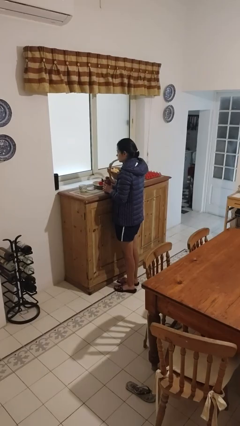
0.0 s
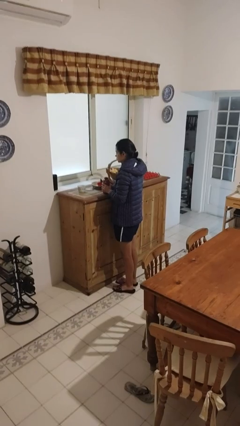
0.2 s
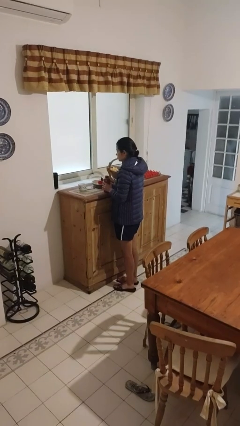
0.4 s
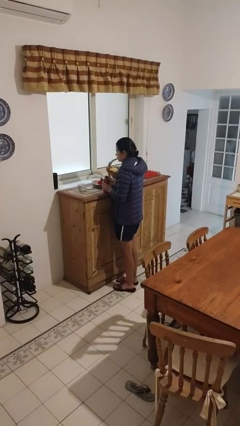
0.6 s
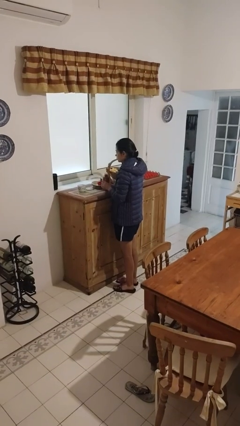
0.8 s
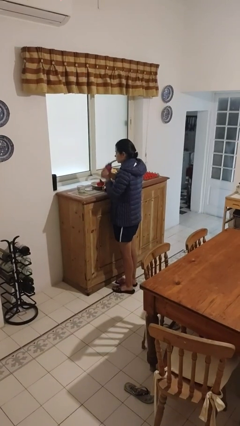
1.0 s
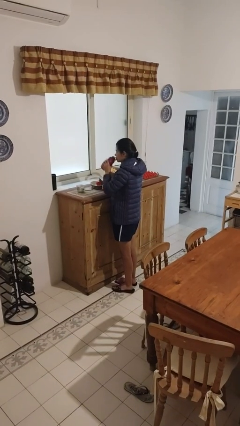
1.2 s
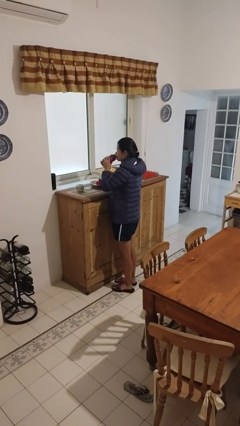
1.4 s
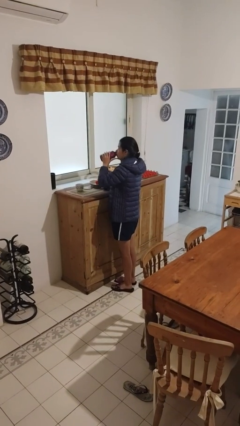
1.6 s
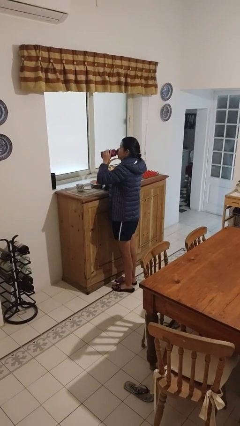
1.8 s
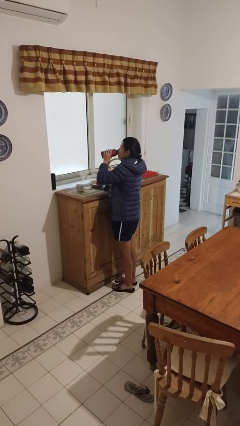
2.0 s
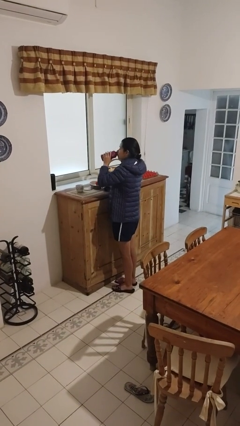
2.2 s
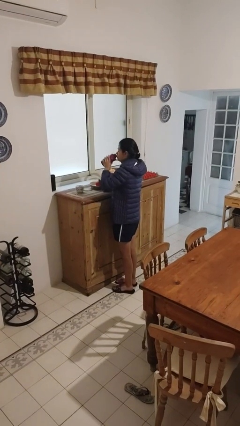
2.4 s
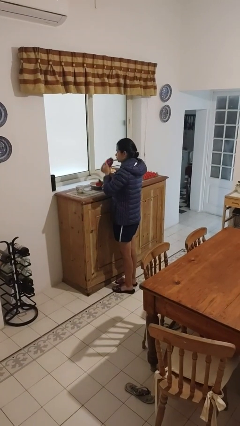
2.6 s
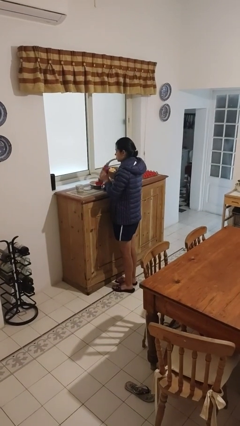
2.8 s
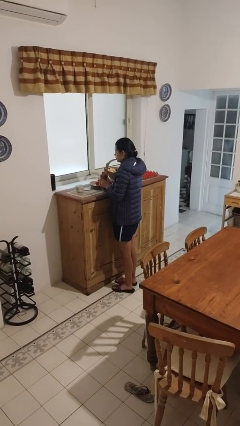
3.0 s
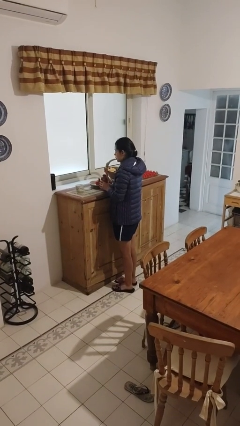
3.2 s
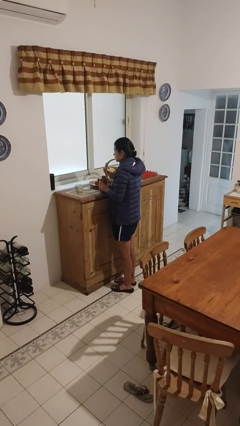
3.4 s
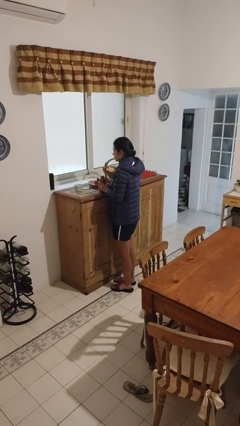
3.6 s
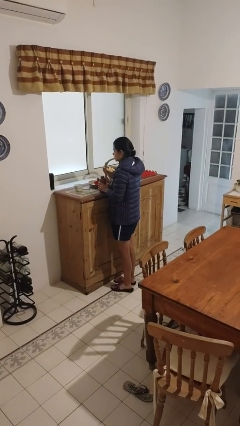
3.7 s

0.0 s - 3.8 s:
person drinks from bottle

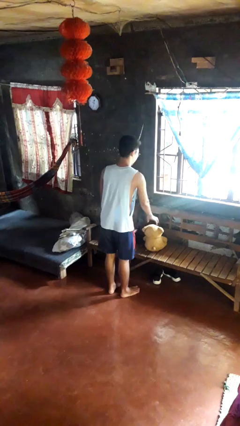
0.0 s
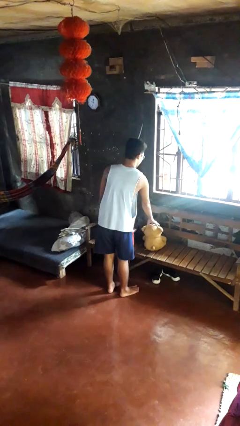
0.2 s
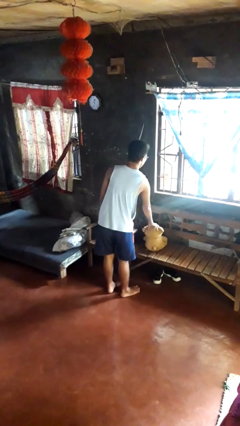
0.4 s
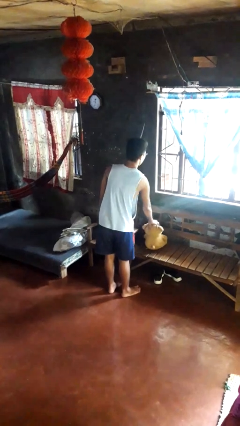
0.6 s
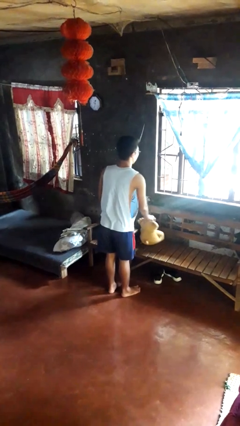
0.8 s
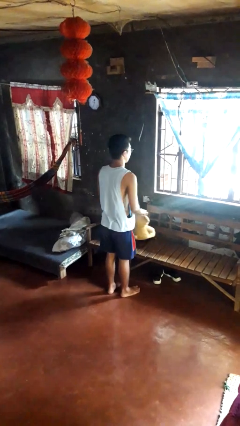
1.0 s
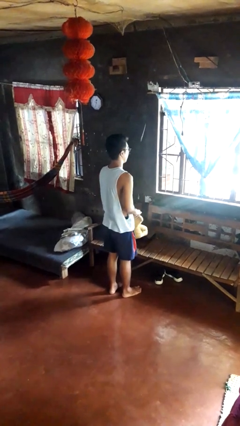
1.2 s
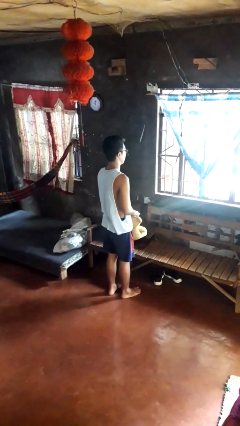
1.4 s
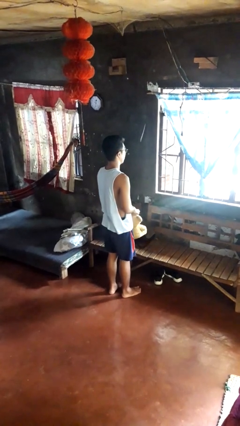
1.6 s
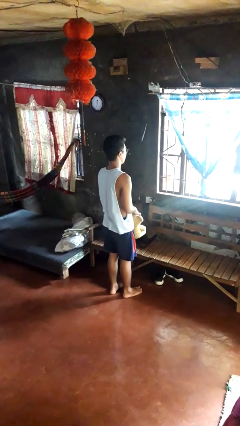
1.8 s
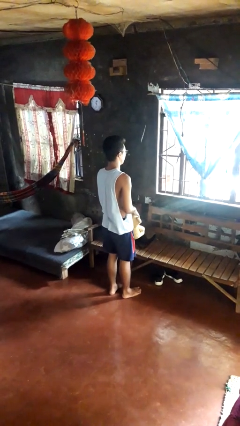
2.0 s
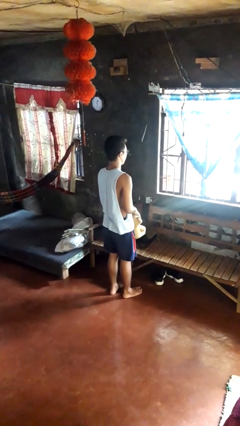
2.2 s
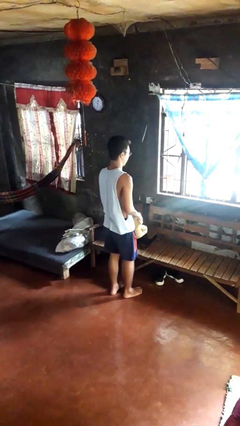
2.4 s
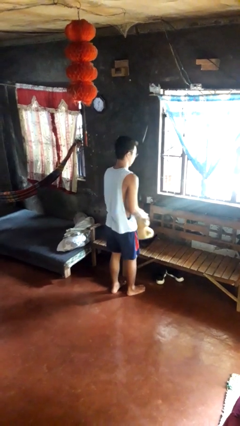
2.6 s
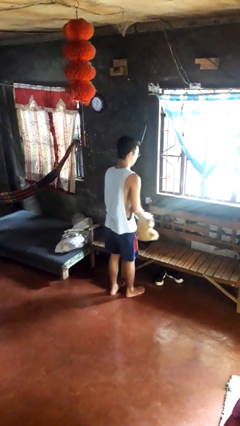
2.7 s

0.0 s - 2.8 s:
person picks up object from couch

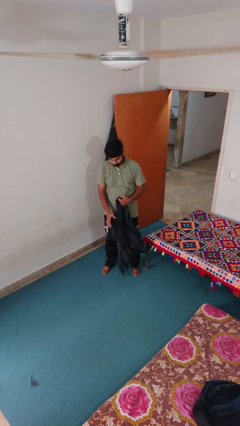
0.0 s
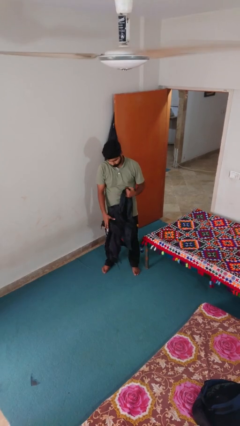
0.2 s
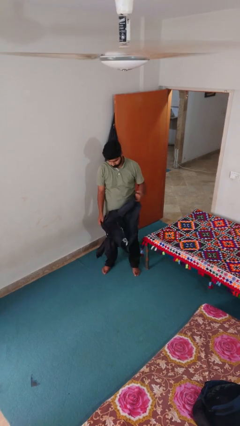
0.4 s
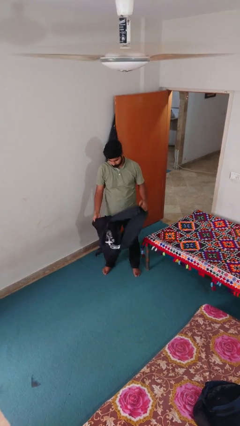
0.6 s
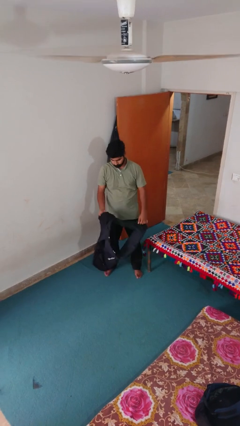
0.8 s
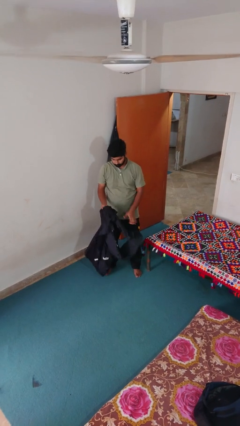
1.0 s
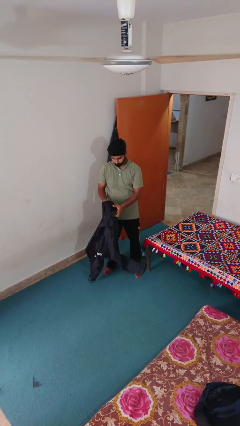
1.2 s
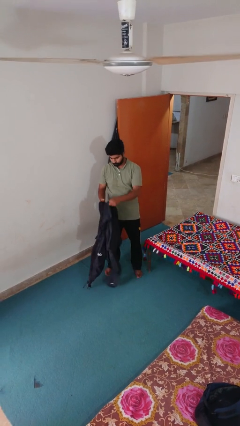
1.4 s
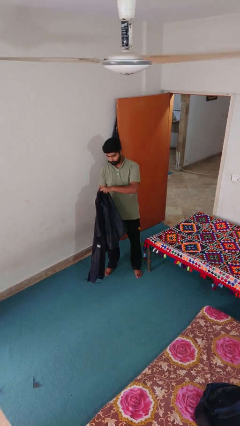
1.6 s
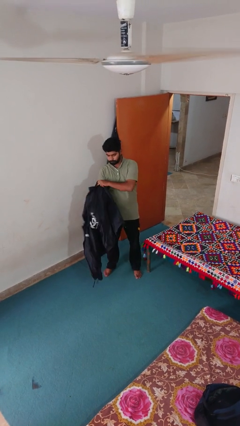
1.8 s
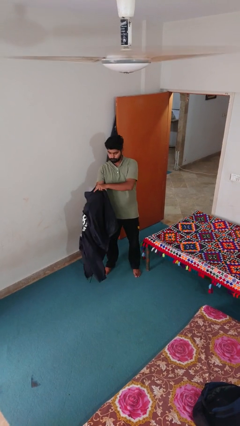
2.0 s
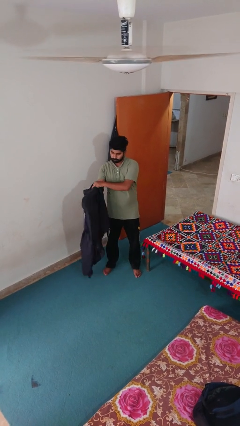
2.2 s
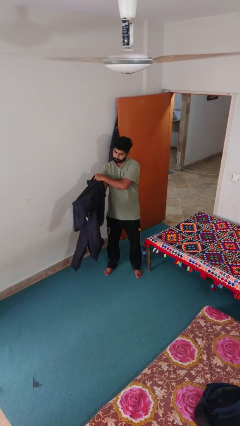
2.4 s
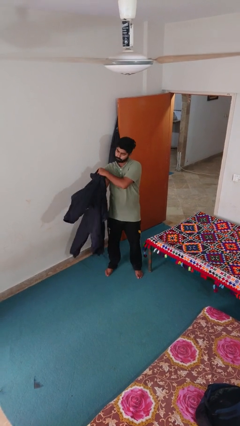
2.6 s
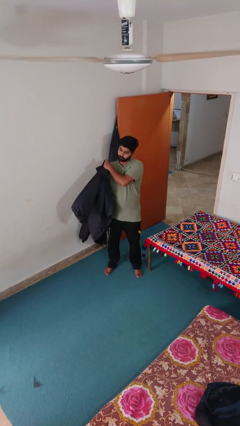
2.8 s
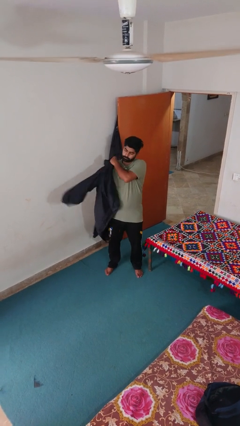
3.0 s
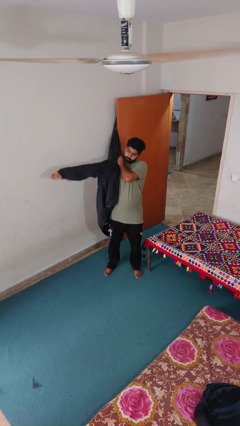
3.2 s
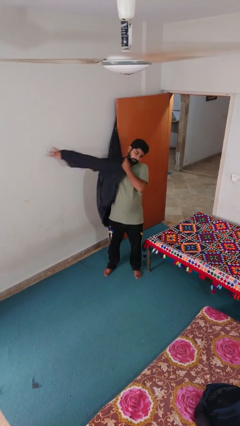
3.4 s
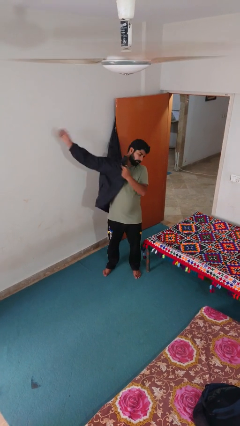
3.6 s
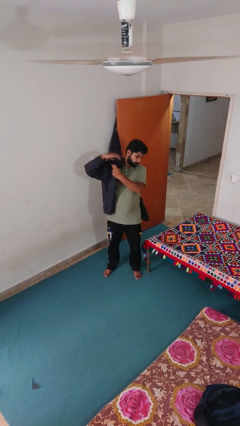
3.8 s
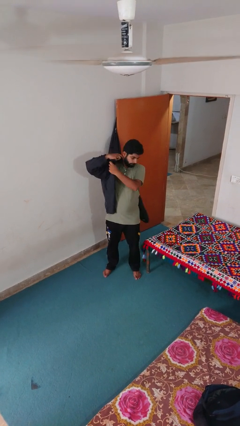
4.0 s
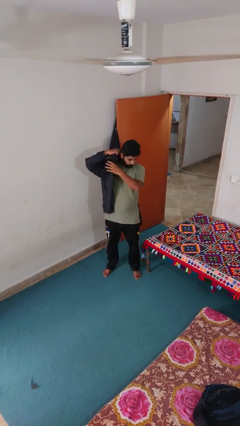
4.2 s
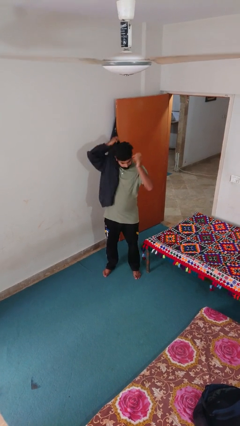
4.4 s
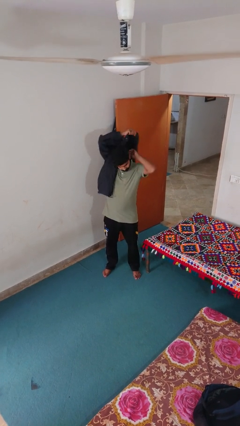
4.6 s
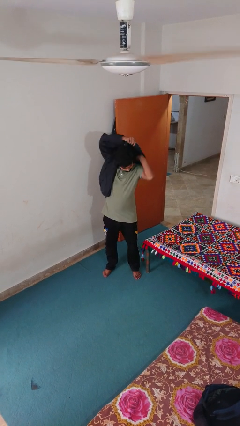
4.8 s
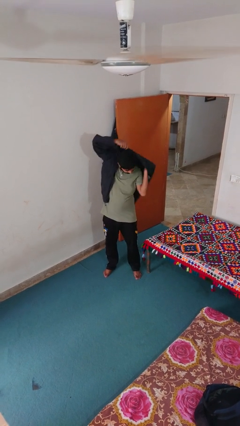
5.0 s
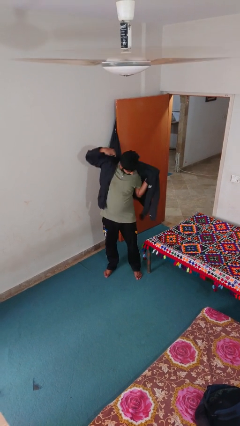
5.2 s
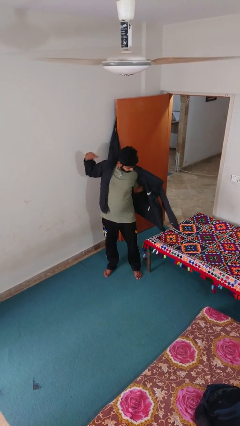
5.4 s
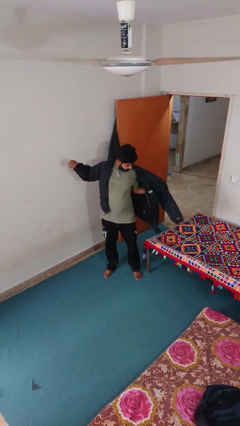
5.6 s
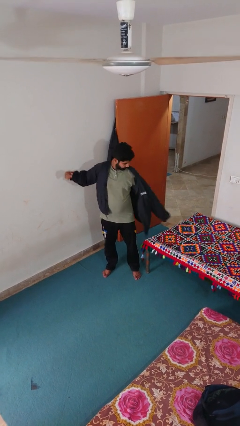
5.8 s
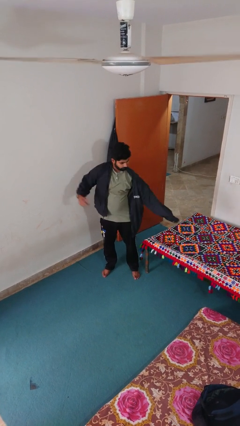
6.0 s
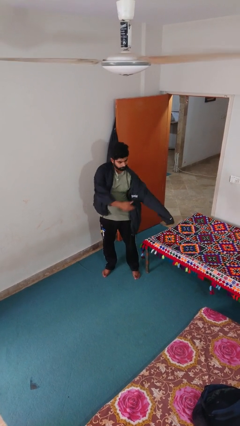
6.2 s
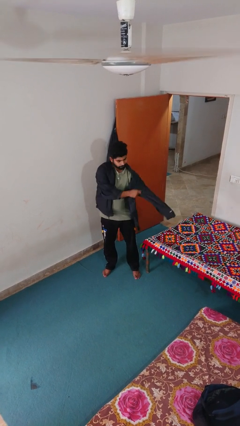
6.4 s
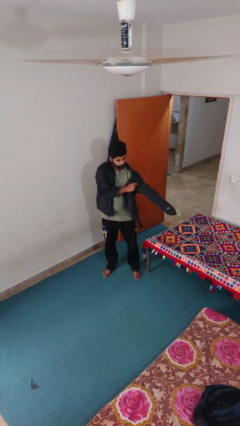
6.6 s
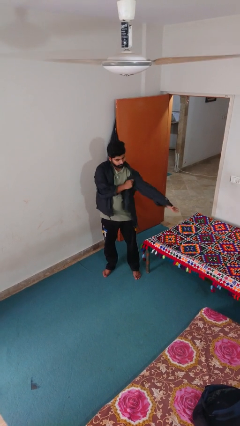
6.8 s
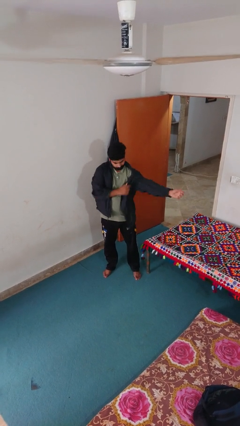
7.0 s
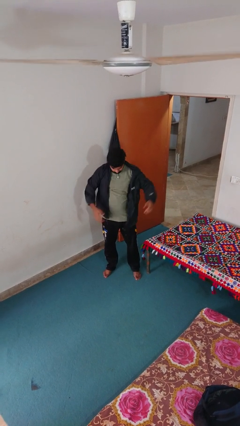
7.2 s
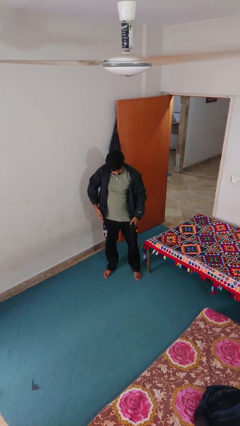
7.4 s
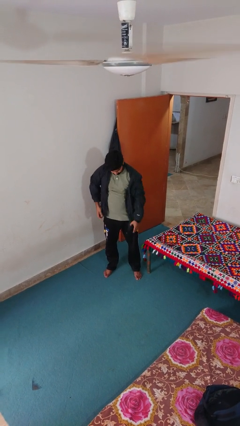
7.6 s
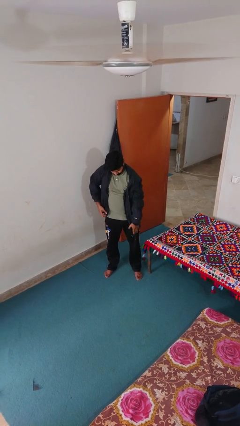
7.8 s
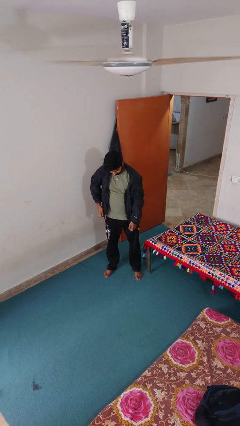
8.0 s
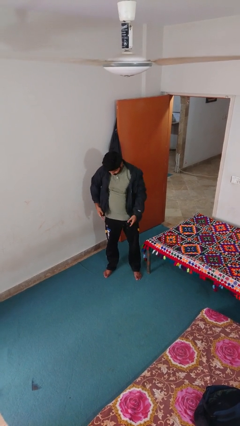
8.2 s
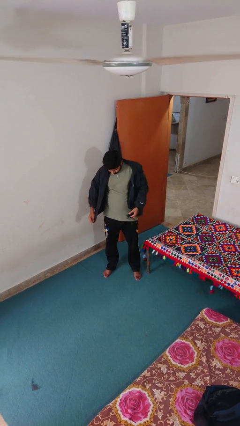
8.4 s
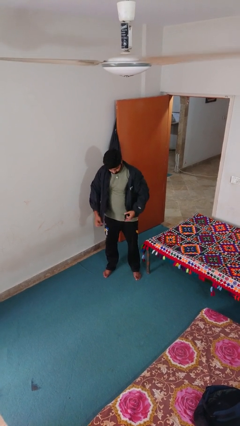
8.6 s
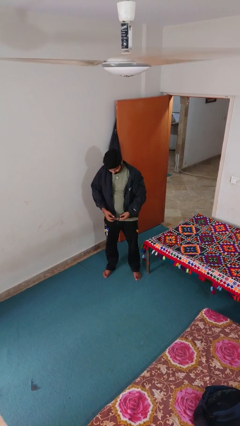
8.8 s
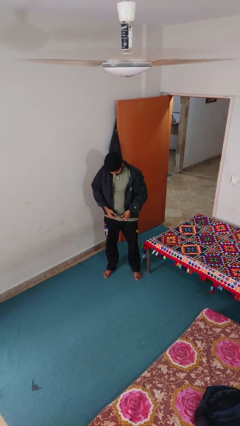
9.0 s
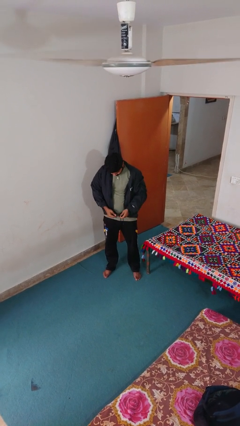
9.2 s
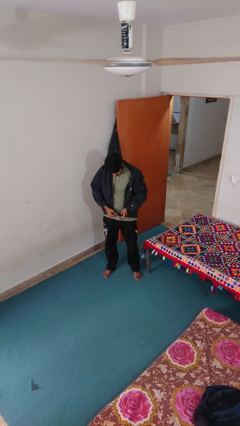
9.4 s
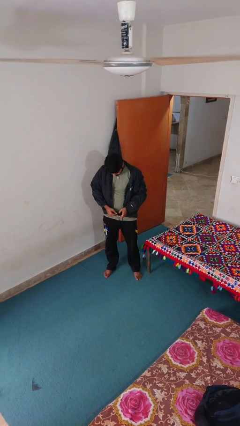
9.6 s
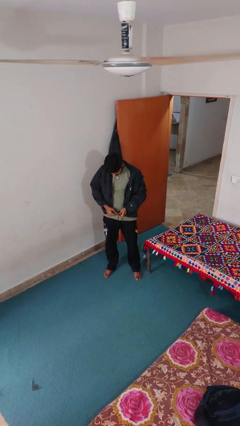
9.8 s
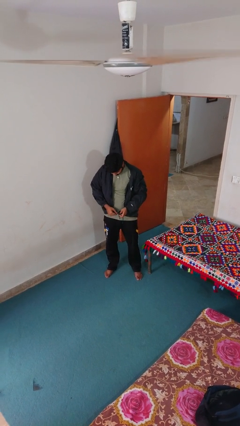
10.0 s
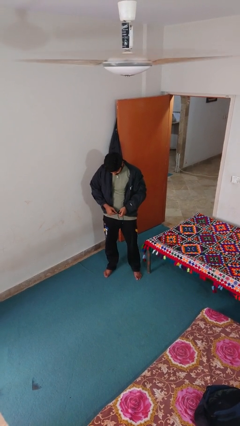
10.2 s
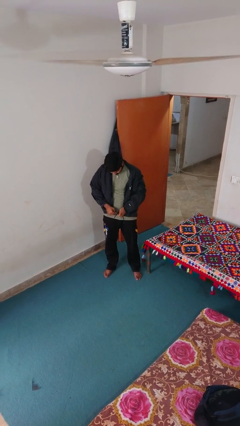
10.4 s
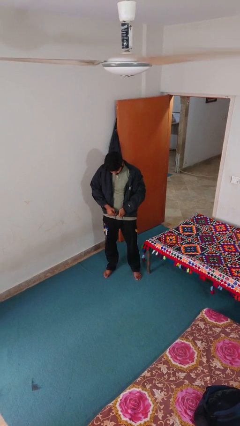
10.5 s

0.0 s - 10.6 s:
person puts on jacket

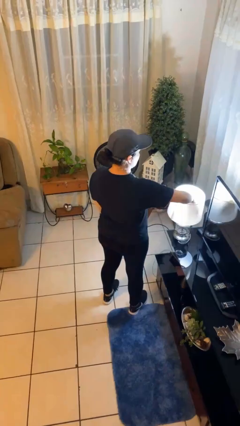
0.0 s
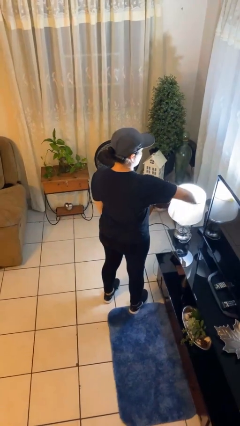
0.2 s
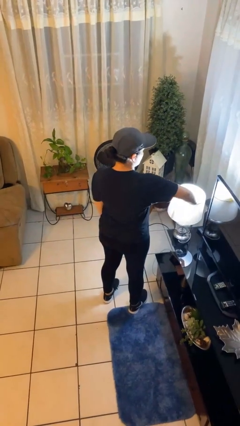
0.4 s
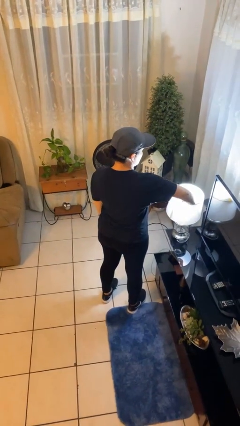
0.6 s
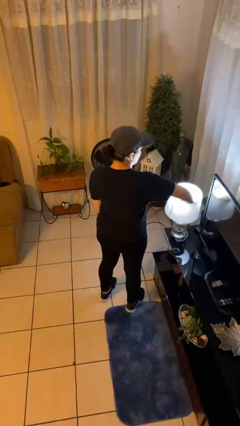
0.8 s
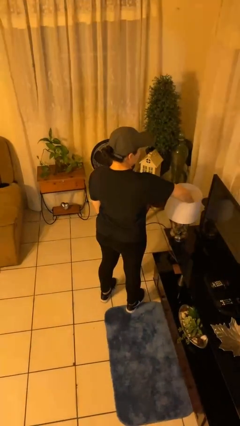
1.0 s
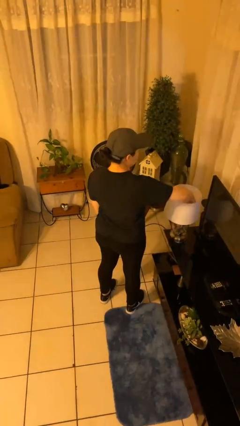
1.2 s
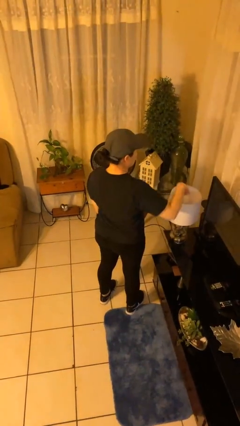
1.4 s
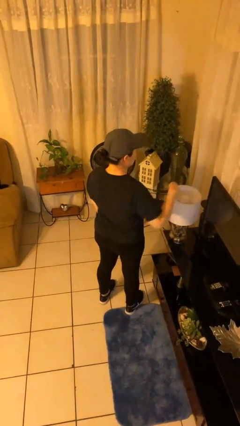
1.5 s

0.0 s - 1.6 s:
person turns off lamp
